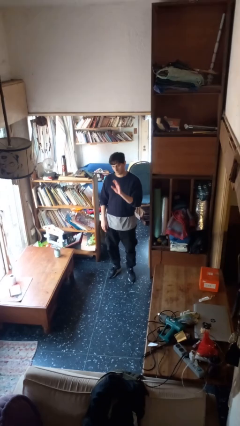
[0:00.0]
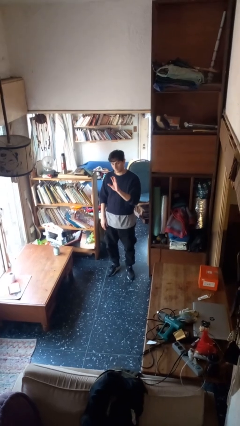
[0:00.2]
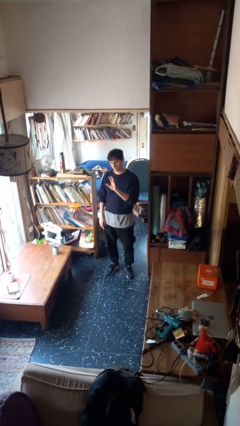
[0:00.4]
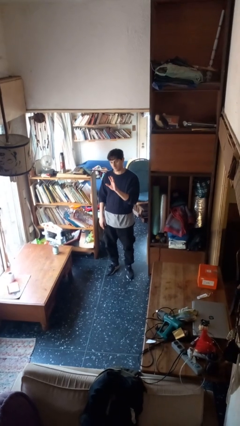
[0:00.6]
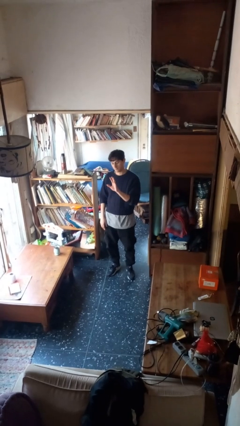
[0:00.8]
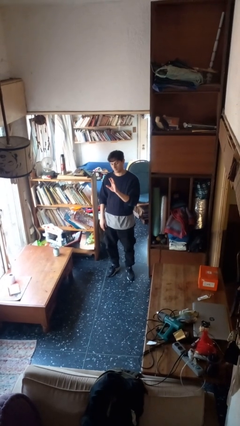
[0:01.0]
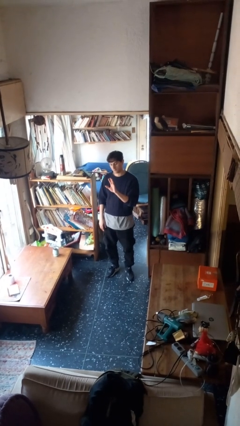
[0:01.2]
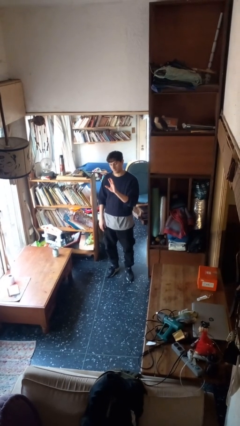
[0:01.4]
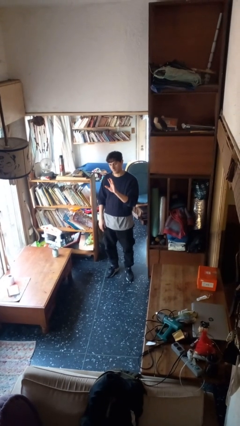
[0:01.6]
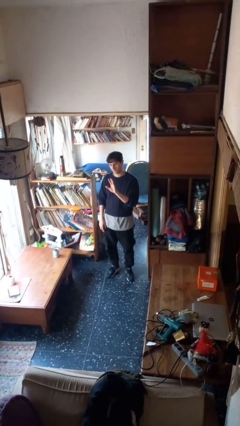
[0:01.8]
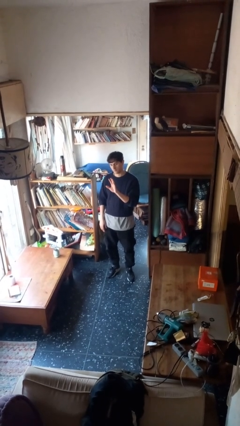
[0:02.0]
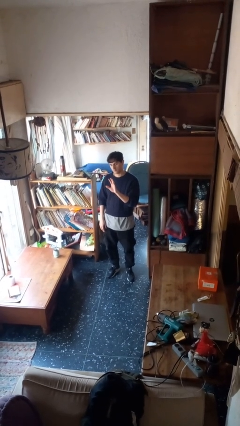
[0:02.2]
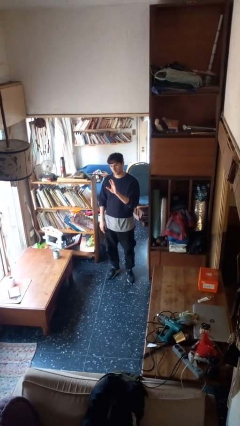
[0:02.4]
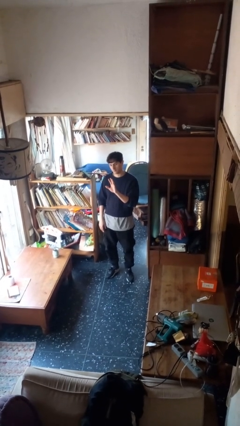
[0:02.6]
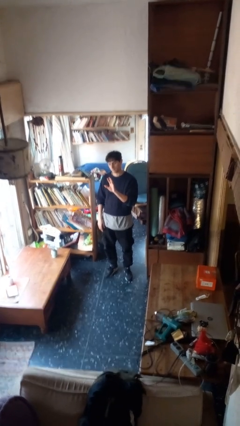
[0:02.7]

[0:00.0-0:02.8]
person gestures number five

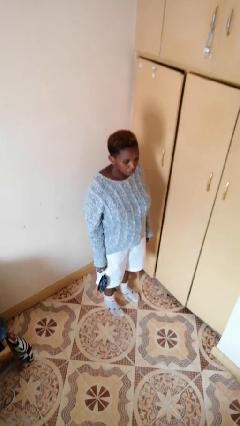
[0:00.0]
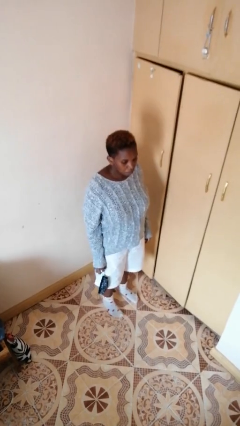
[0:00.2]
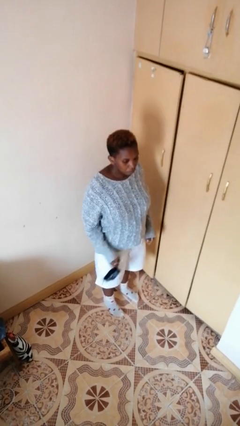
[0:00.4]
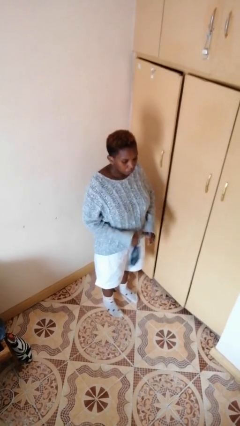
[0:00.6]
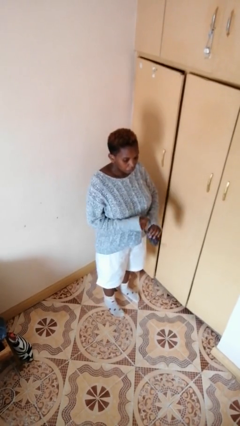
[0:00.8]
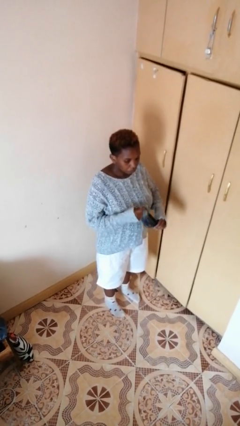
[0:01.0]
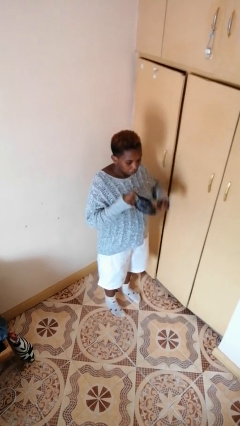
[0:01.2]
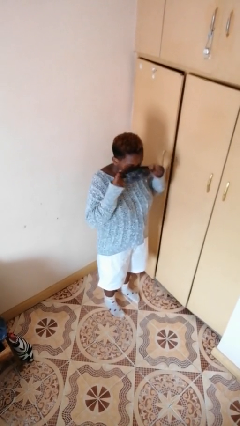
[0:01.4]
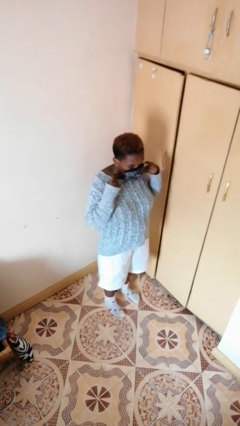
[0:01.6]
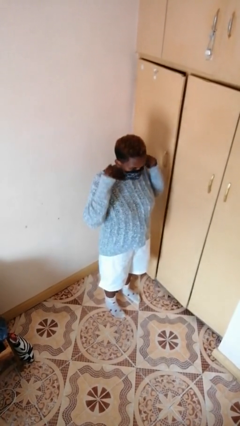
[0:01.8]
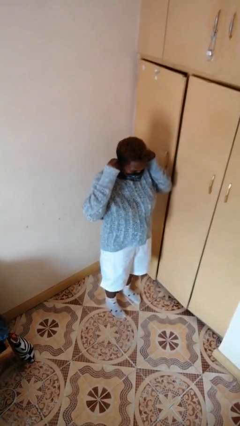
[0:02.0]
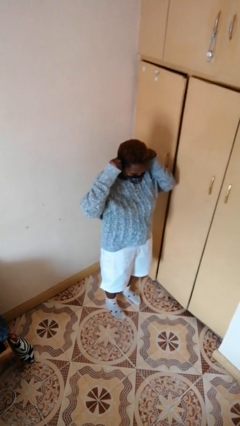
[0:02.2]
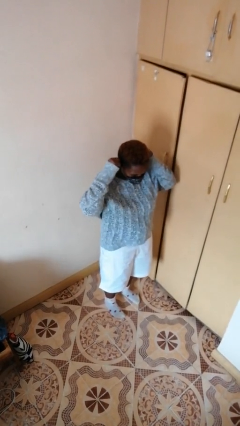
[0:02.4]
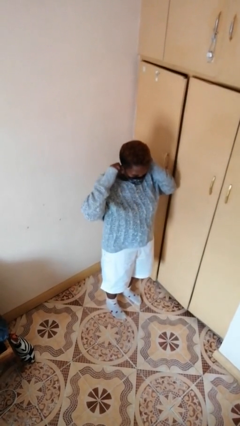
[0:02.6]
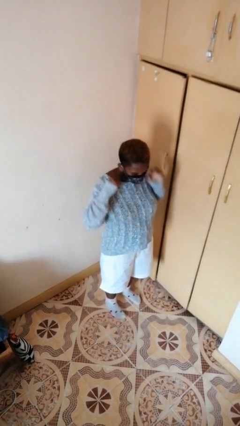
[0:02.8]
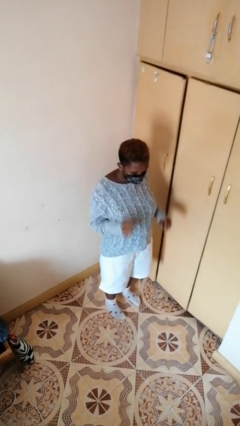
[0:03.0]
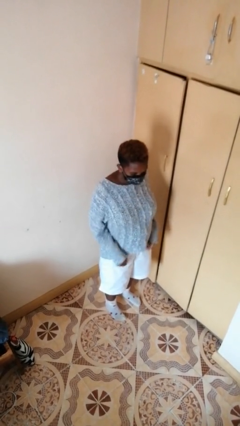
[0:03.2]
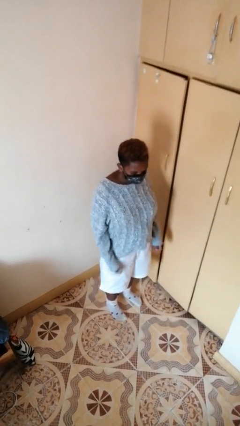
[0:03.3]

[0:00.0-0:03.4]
person puts on facemask

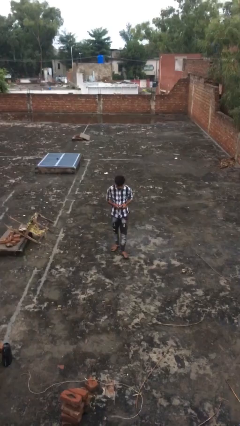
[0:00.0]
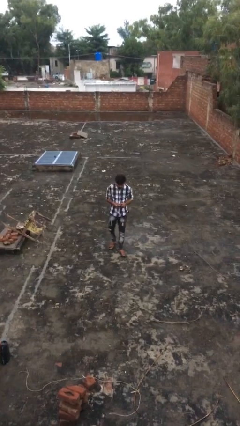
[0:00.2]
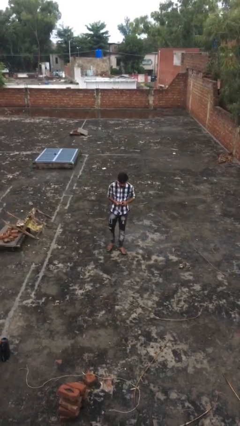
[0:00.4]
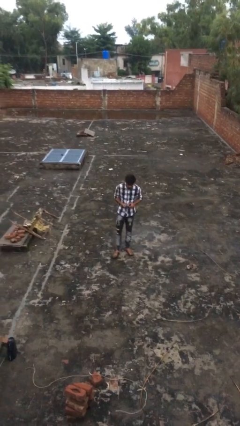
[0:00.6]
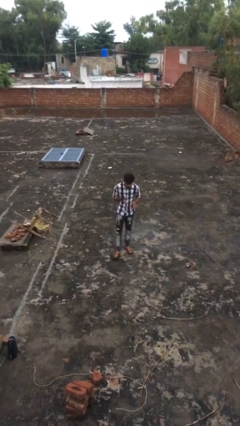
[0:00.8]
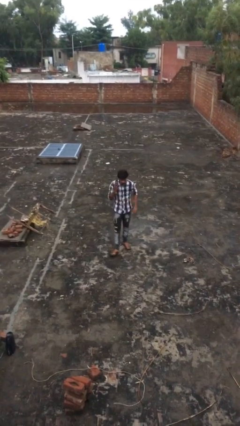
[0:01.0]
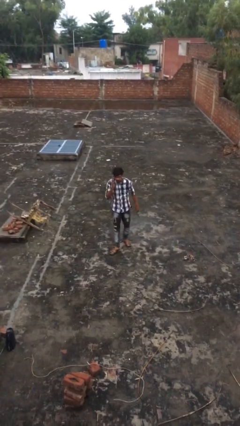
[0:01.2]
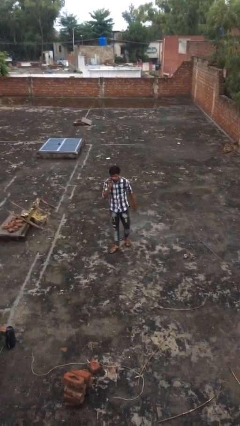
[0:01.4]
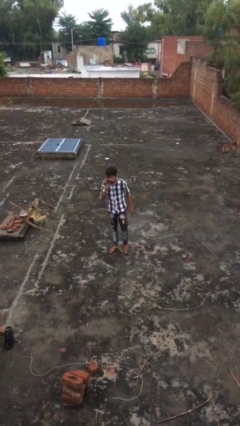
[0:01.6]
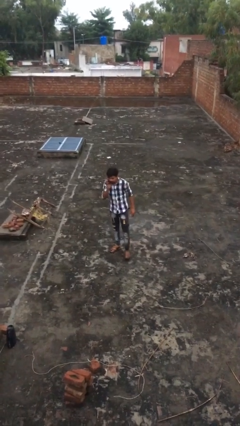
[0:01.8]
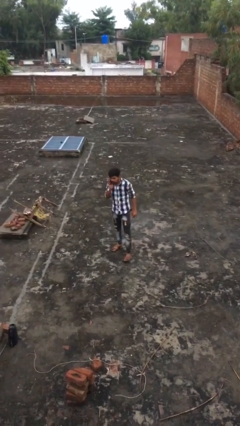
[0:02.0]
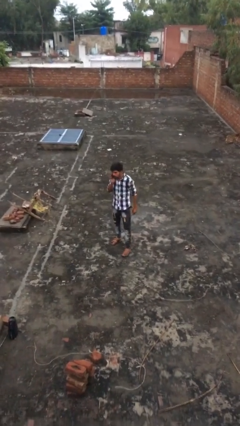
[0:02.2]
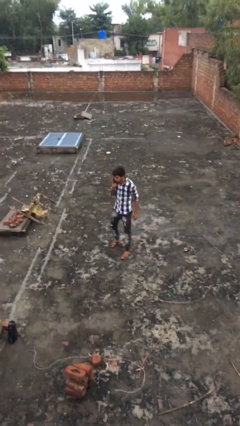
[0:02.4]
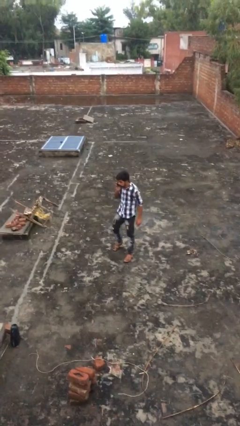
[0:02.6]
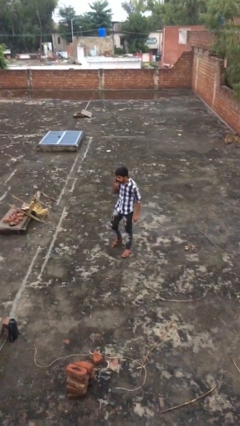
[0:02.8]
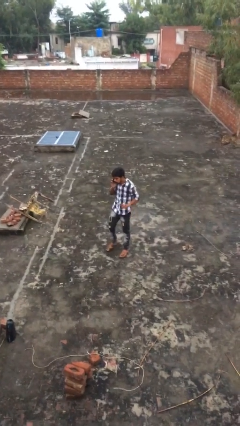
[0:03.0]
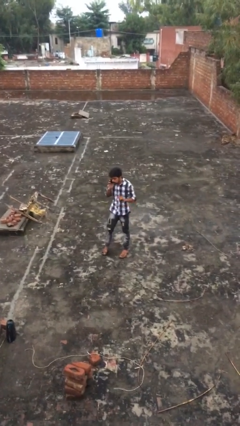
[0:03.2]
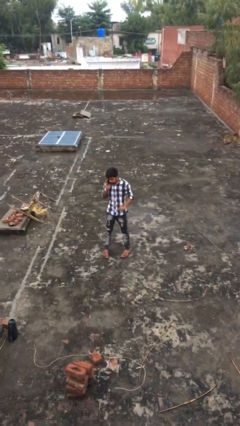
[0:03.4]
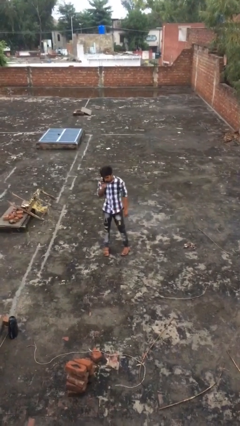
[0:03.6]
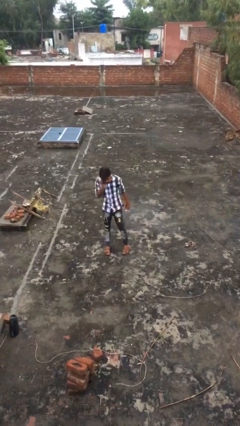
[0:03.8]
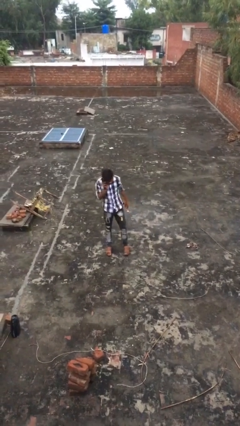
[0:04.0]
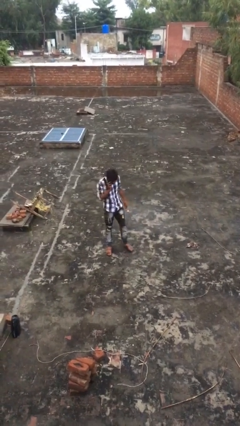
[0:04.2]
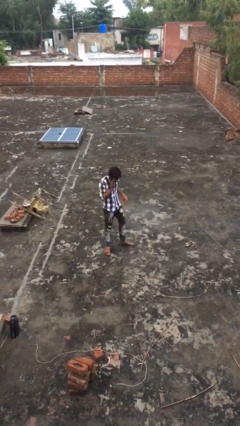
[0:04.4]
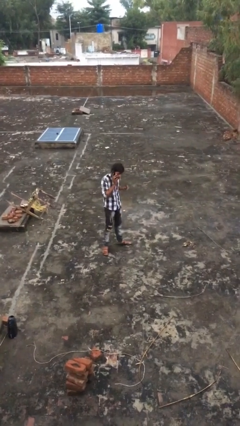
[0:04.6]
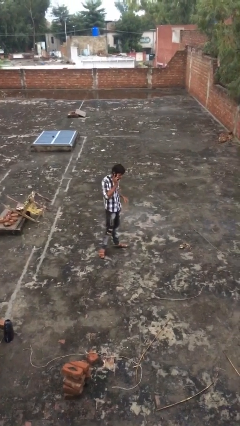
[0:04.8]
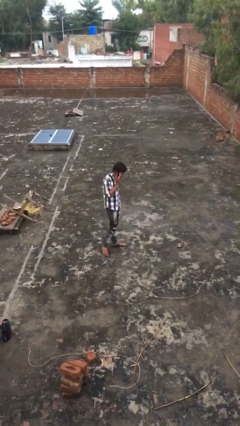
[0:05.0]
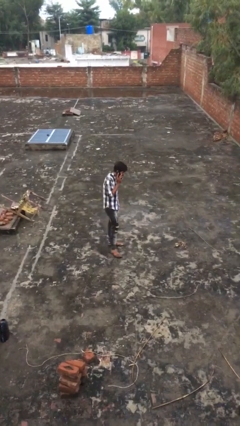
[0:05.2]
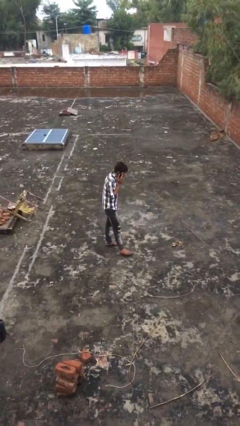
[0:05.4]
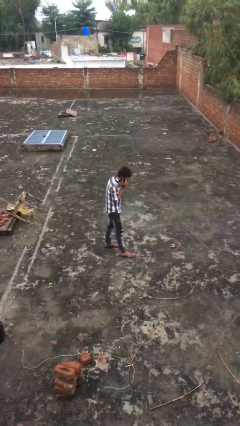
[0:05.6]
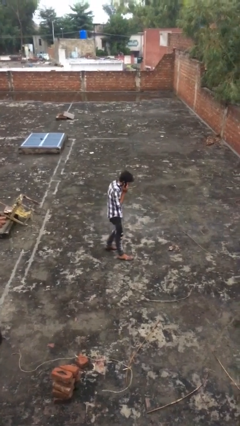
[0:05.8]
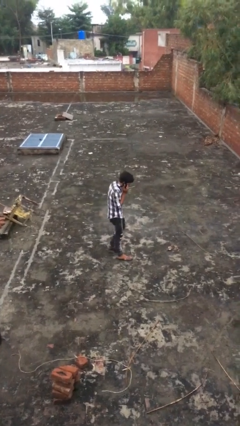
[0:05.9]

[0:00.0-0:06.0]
person talks on phone

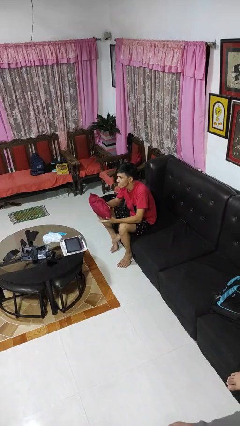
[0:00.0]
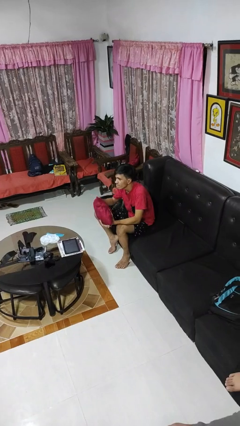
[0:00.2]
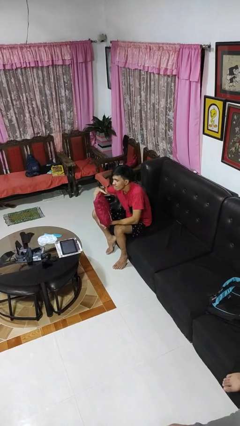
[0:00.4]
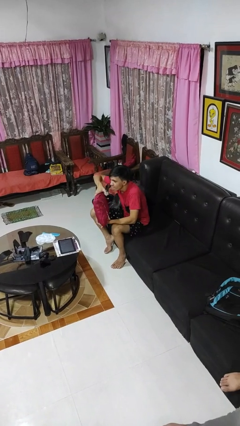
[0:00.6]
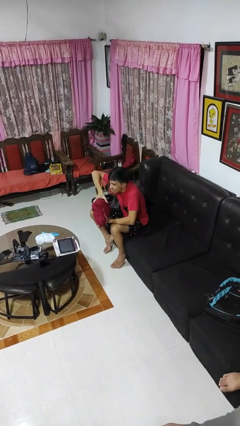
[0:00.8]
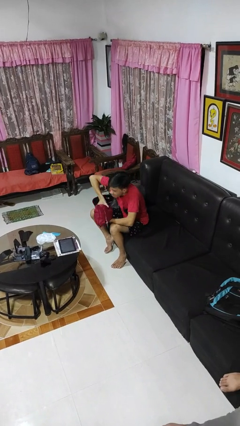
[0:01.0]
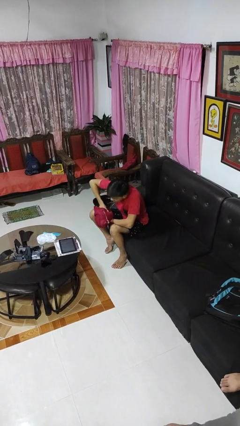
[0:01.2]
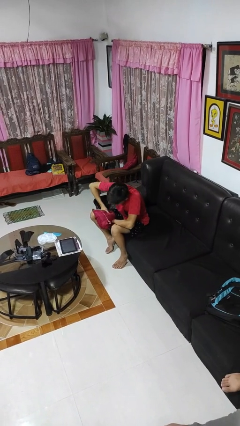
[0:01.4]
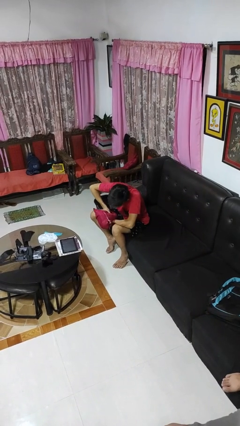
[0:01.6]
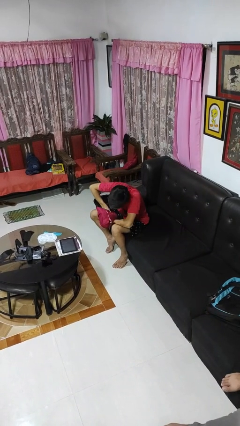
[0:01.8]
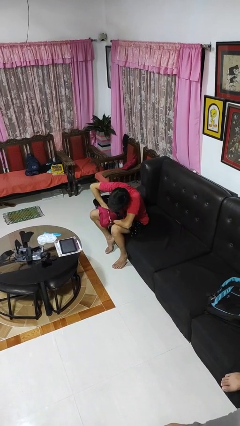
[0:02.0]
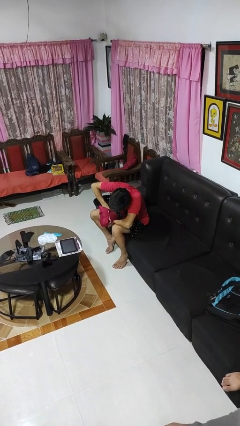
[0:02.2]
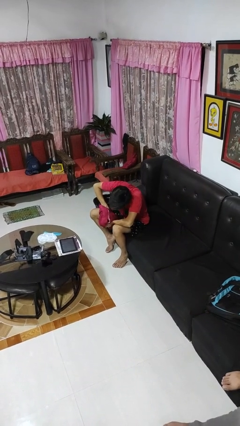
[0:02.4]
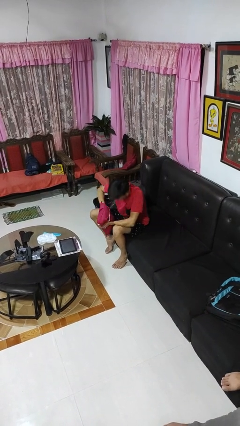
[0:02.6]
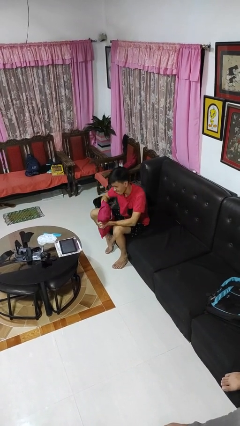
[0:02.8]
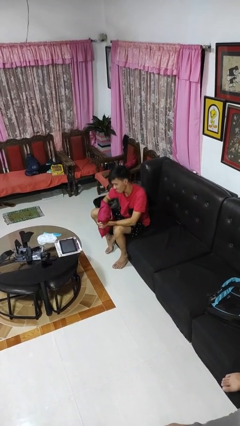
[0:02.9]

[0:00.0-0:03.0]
person squeezes object

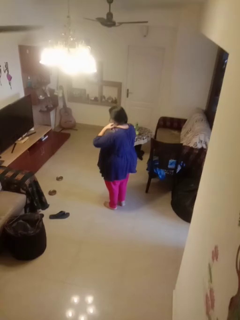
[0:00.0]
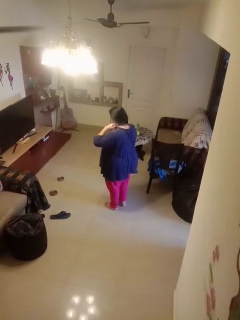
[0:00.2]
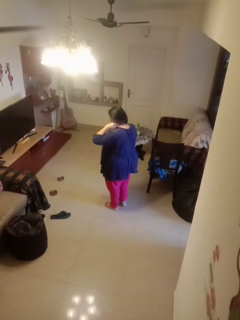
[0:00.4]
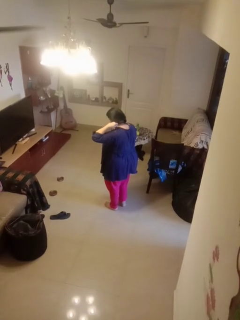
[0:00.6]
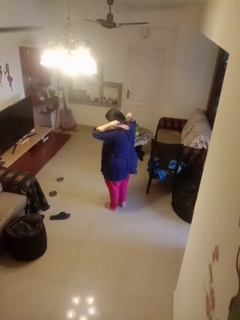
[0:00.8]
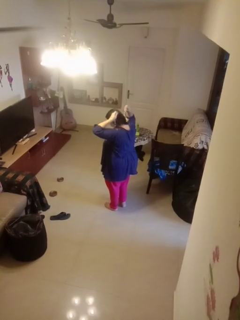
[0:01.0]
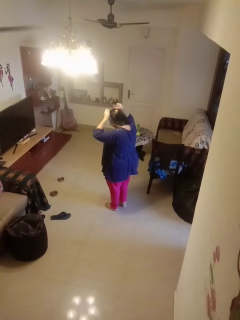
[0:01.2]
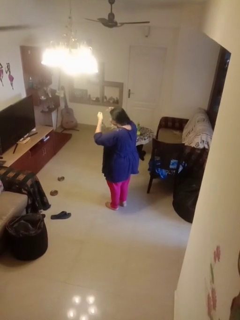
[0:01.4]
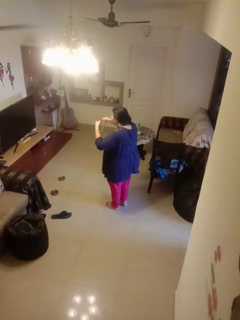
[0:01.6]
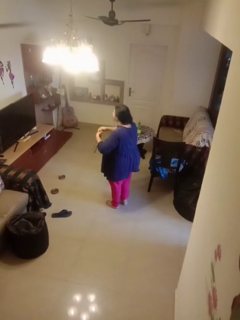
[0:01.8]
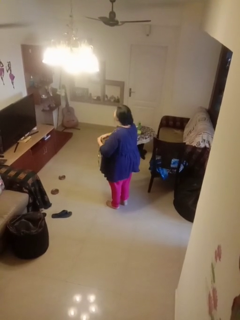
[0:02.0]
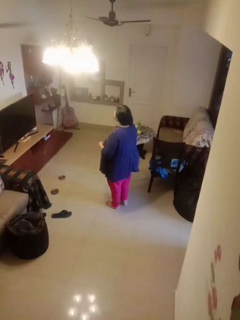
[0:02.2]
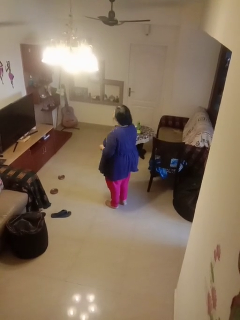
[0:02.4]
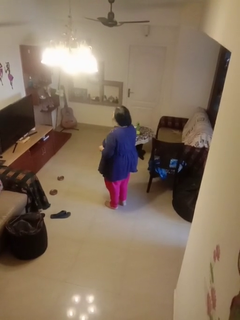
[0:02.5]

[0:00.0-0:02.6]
person takes off necklace

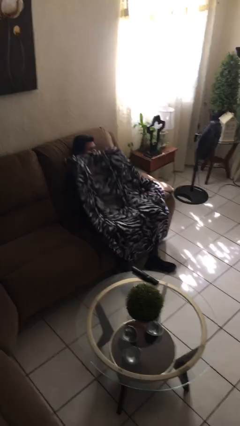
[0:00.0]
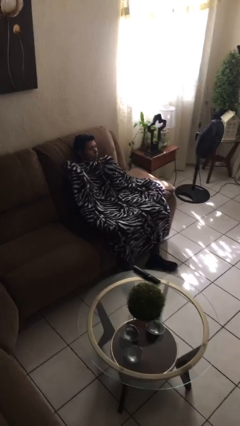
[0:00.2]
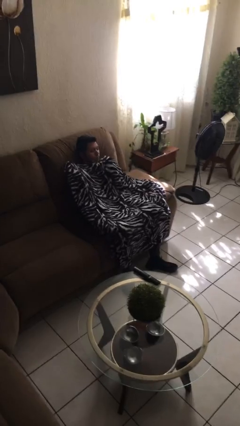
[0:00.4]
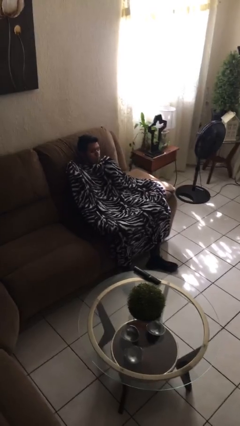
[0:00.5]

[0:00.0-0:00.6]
person covers with blanket
